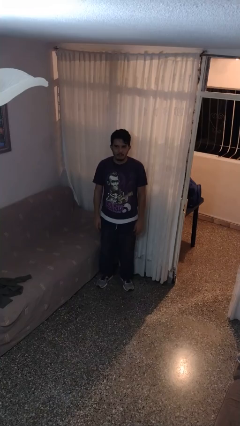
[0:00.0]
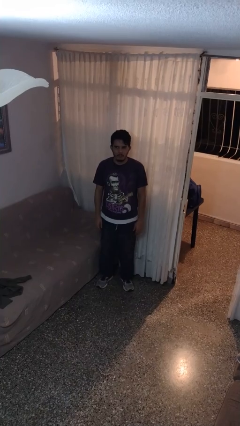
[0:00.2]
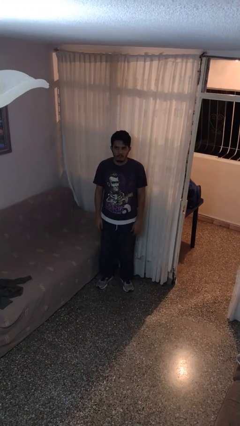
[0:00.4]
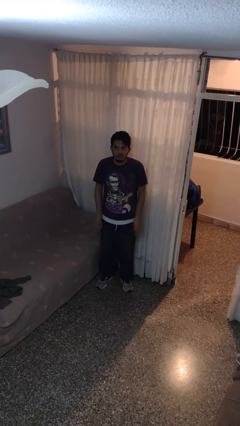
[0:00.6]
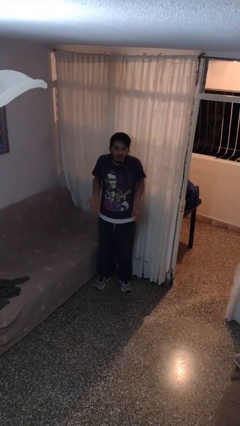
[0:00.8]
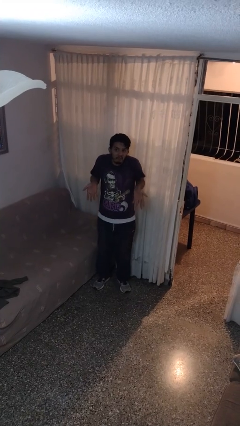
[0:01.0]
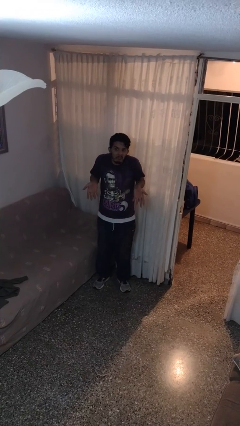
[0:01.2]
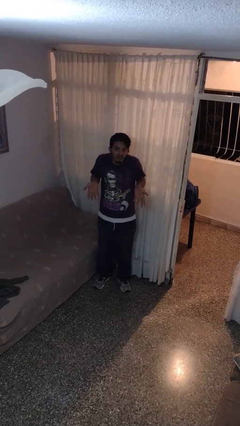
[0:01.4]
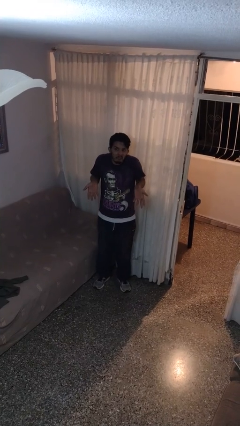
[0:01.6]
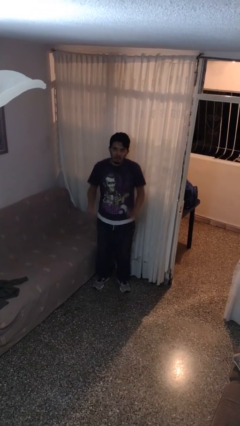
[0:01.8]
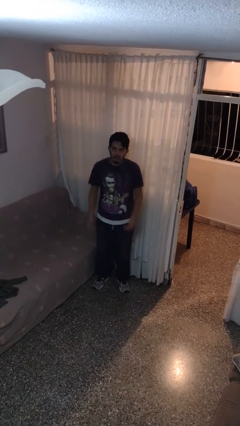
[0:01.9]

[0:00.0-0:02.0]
person shrugs

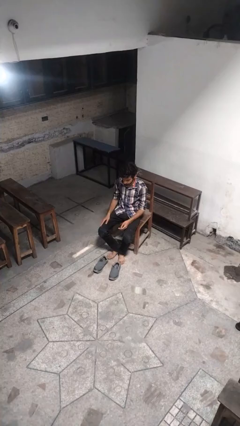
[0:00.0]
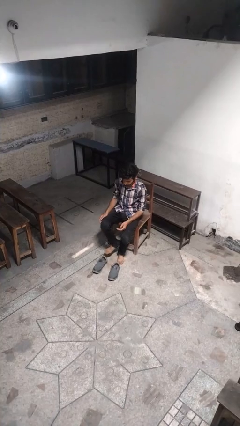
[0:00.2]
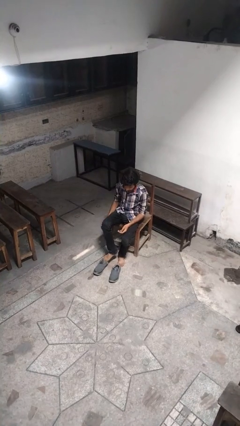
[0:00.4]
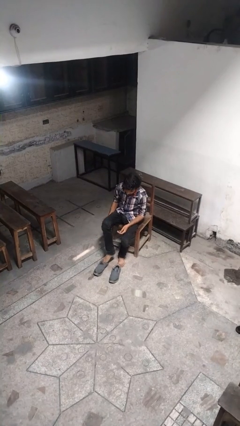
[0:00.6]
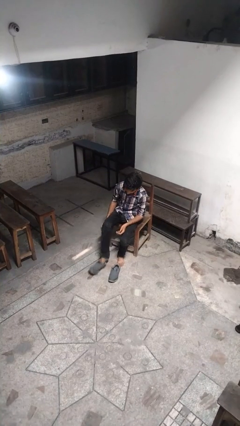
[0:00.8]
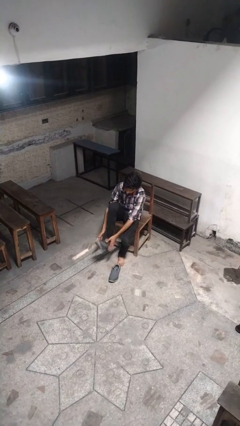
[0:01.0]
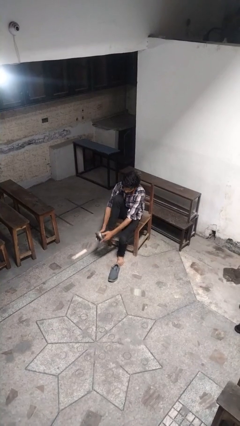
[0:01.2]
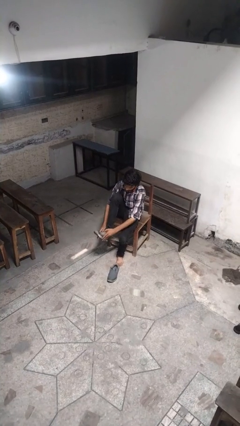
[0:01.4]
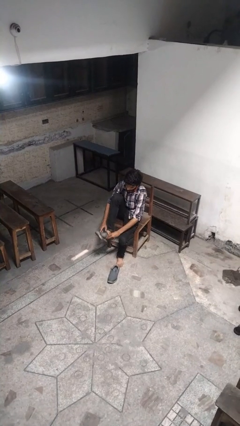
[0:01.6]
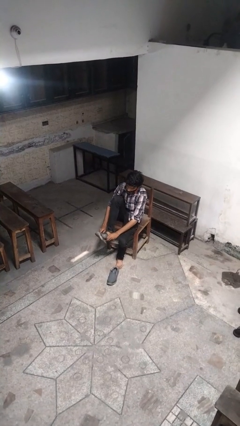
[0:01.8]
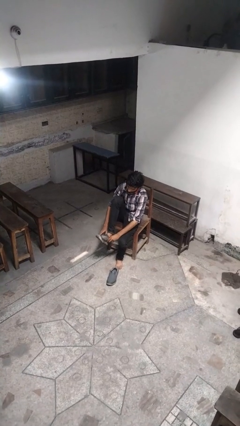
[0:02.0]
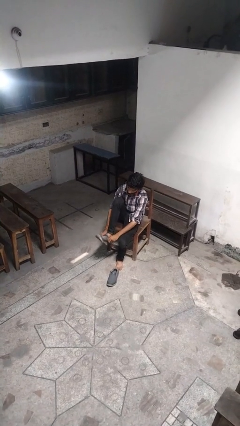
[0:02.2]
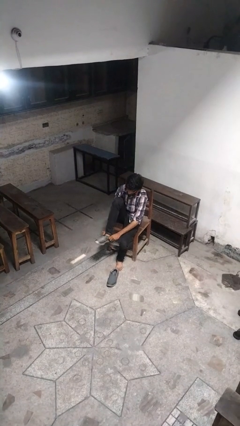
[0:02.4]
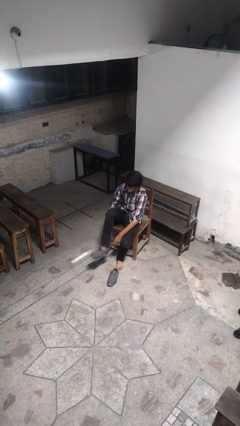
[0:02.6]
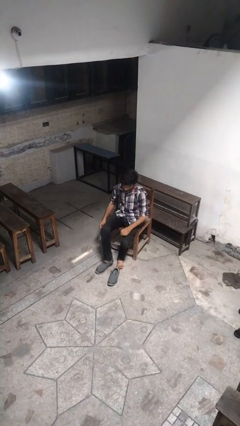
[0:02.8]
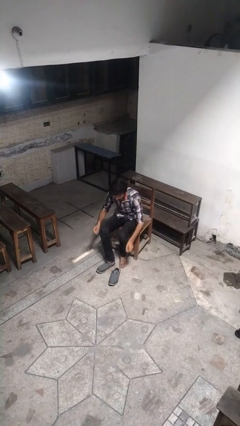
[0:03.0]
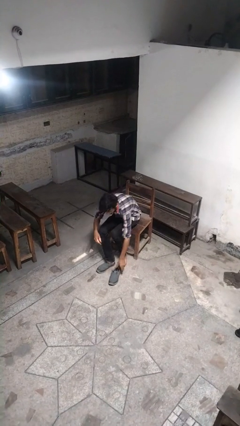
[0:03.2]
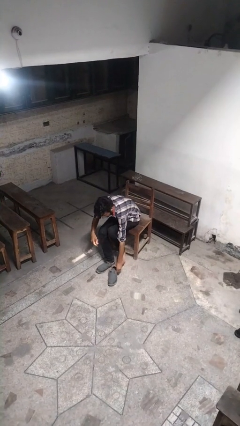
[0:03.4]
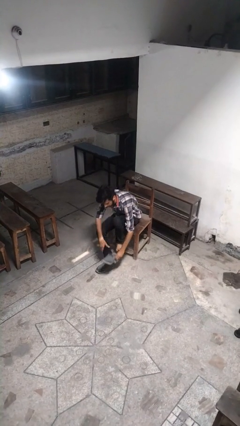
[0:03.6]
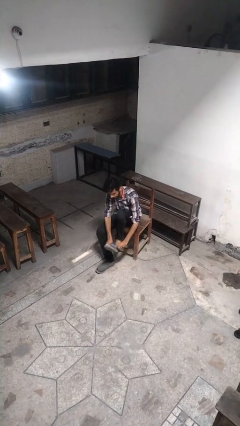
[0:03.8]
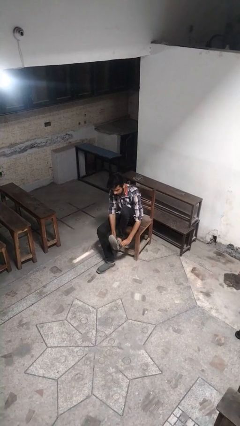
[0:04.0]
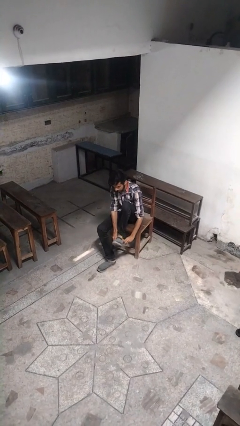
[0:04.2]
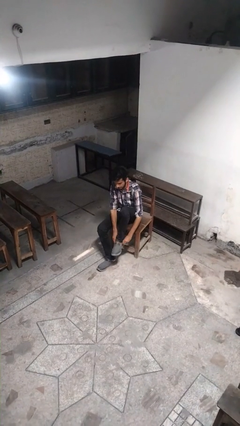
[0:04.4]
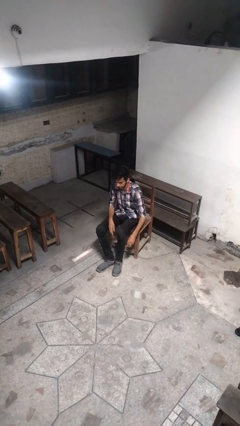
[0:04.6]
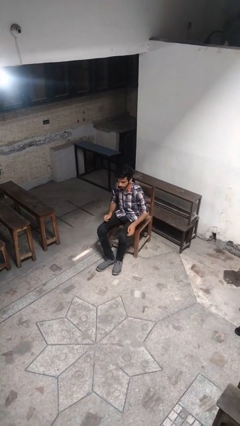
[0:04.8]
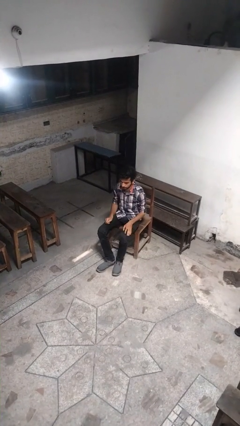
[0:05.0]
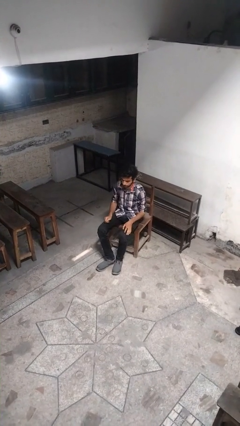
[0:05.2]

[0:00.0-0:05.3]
person puts on shoes

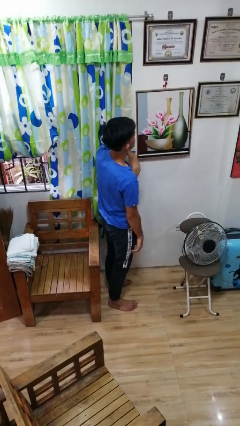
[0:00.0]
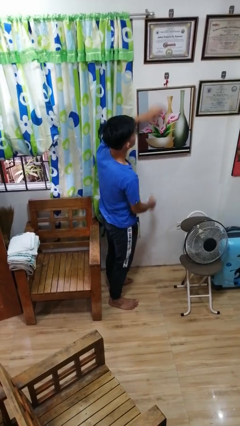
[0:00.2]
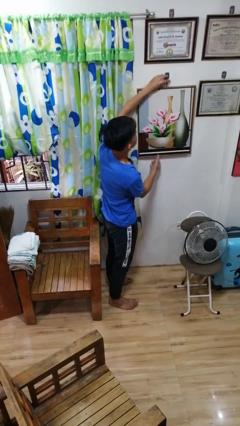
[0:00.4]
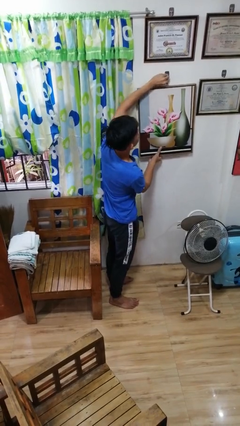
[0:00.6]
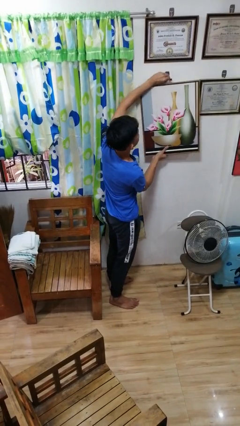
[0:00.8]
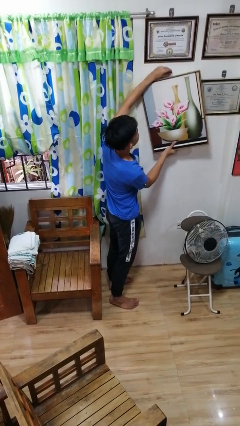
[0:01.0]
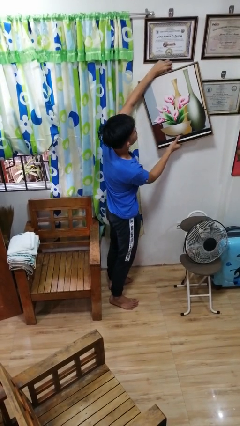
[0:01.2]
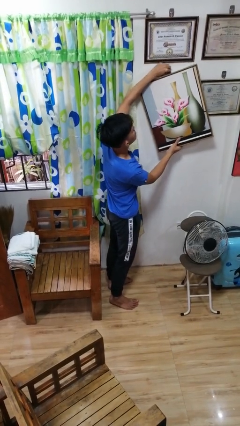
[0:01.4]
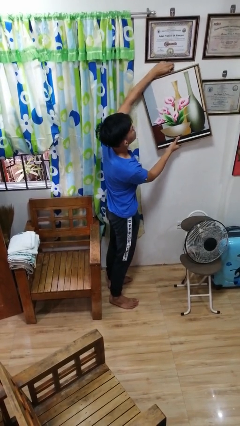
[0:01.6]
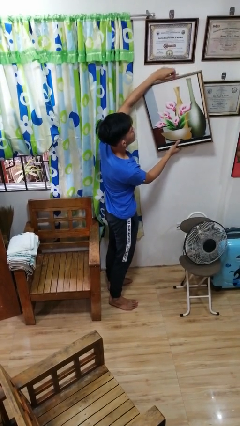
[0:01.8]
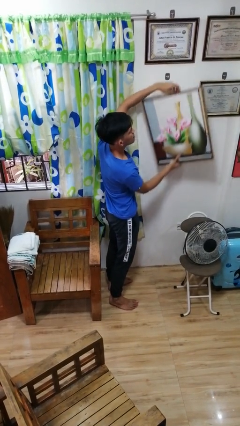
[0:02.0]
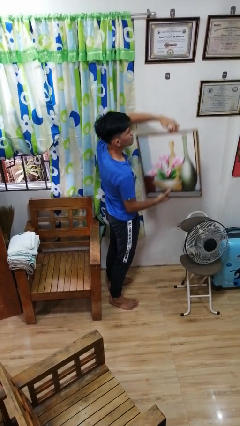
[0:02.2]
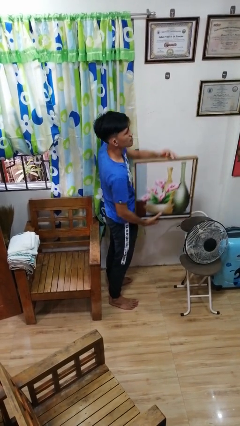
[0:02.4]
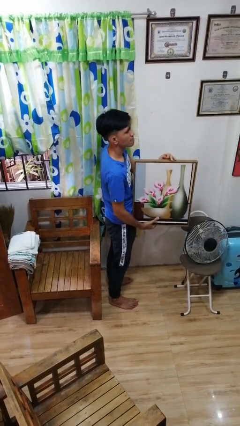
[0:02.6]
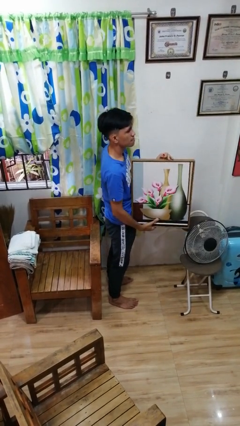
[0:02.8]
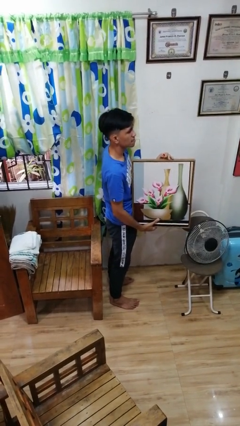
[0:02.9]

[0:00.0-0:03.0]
person takes down picture frame

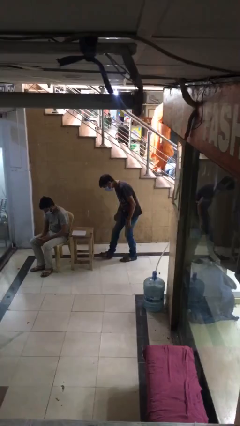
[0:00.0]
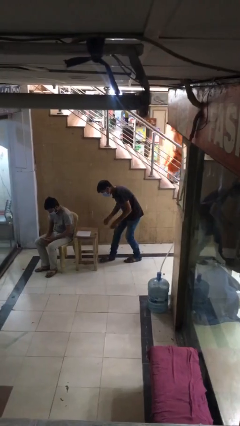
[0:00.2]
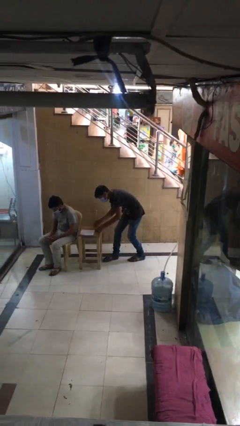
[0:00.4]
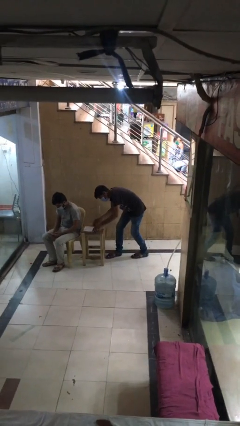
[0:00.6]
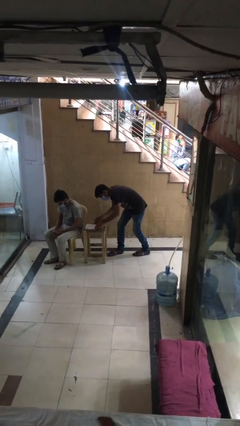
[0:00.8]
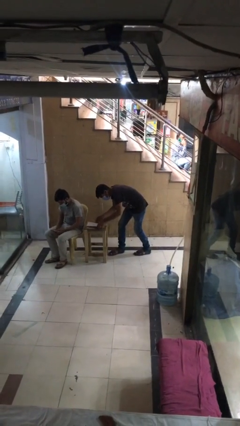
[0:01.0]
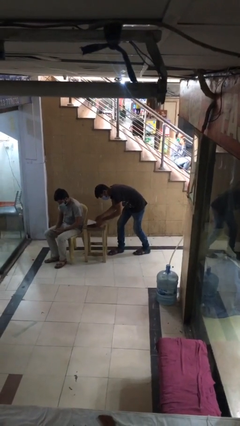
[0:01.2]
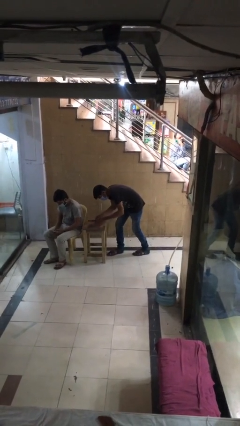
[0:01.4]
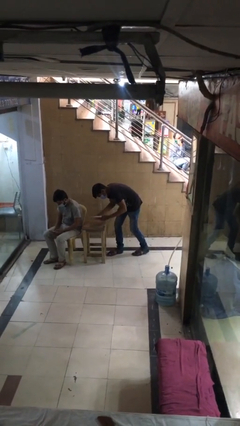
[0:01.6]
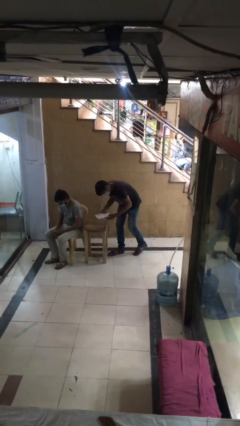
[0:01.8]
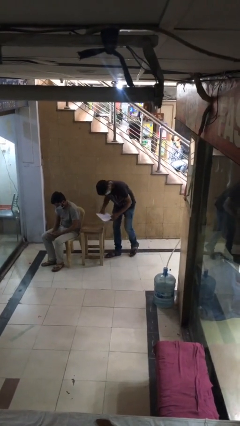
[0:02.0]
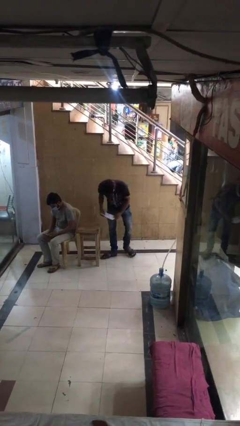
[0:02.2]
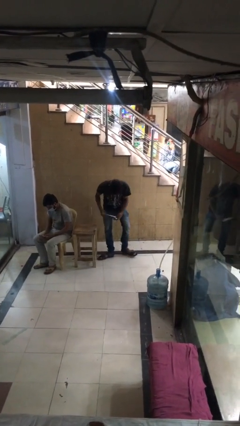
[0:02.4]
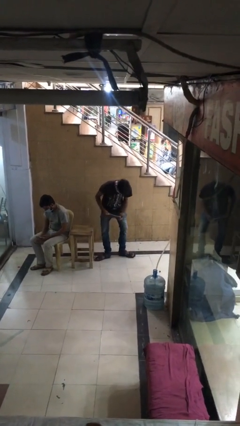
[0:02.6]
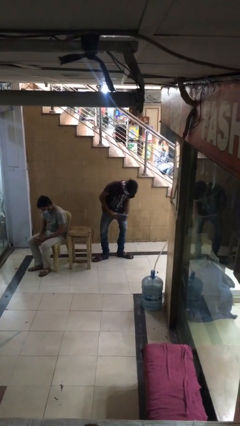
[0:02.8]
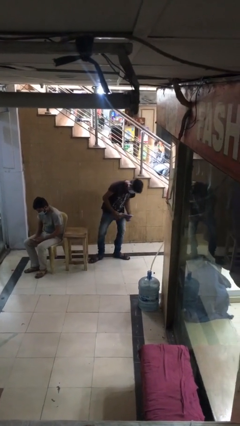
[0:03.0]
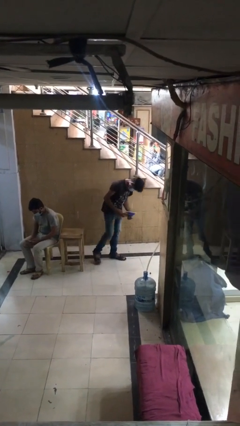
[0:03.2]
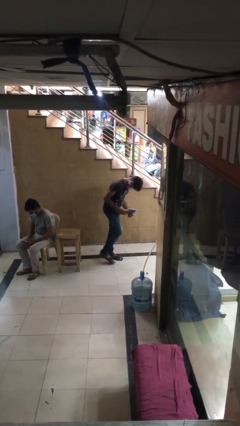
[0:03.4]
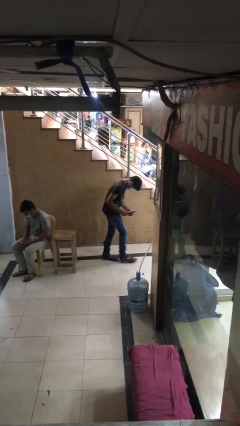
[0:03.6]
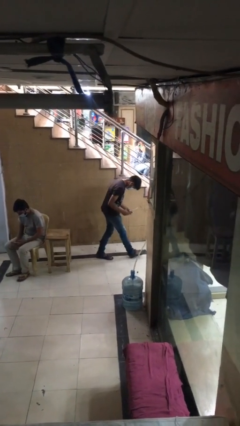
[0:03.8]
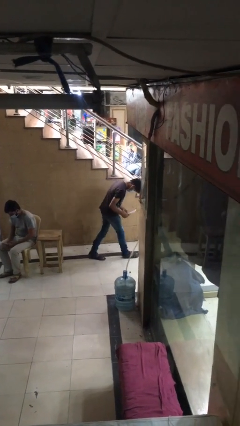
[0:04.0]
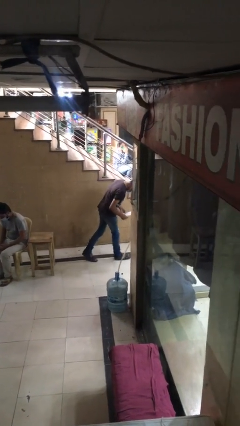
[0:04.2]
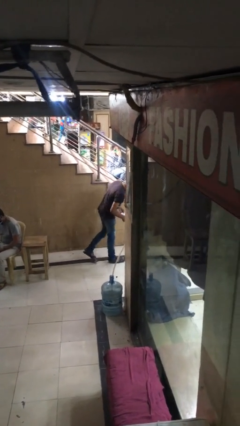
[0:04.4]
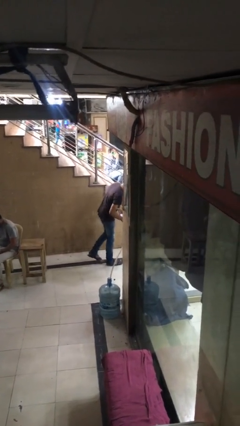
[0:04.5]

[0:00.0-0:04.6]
person steals object from person

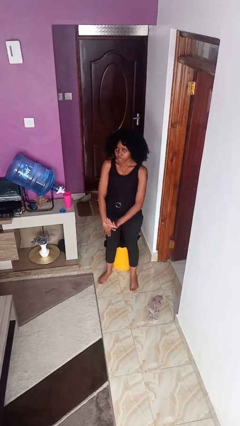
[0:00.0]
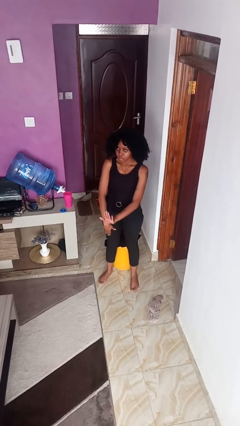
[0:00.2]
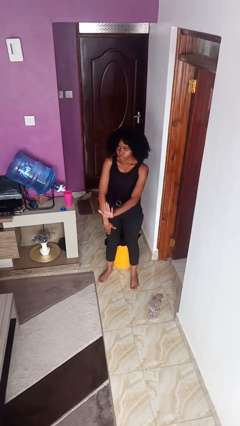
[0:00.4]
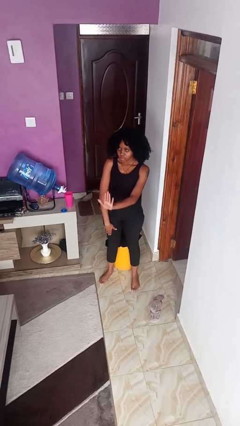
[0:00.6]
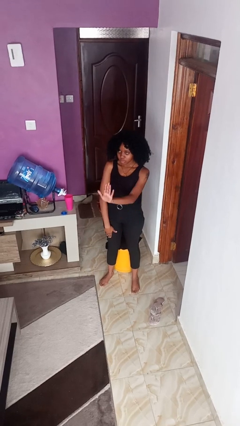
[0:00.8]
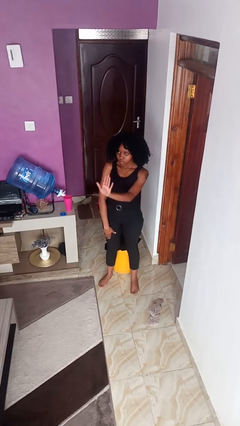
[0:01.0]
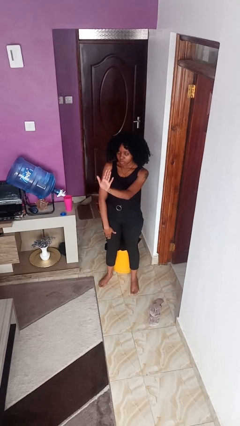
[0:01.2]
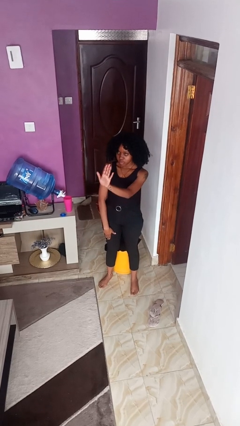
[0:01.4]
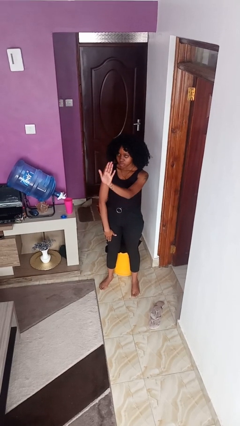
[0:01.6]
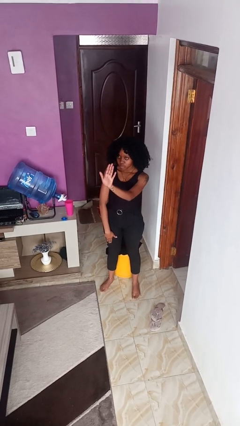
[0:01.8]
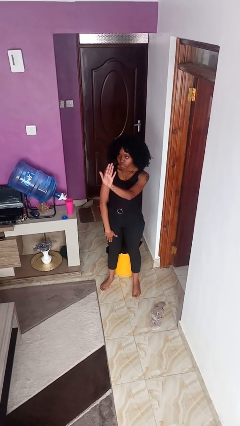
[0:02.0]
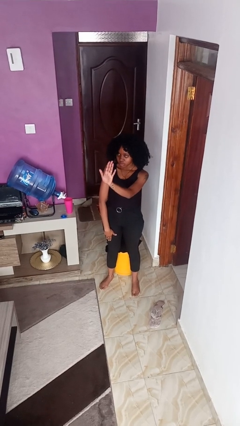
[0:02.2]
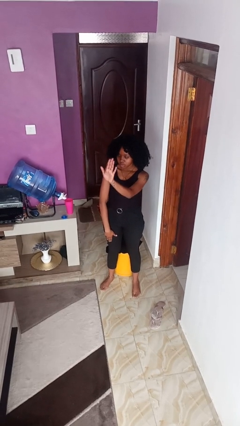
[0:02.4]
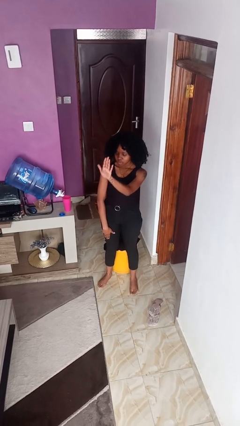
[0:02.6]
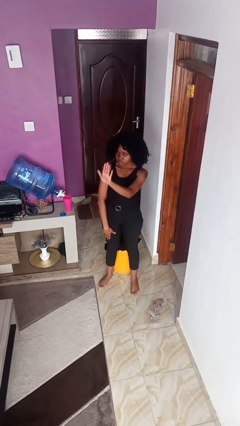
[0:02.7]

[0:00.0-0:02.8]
person gestures swipe up
